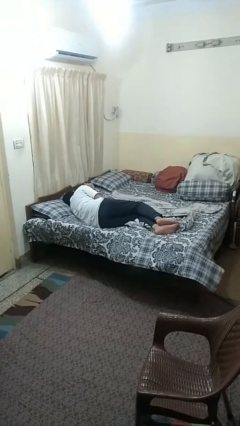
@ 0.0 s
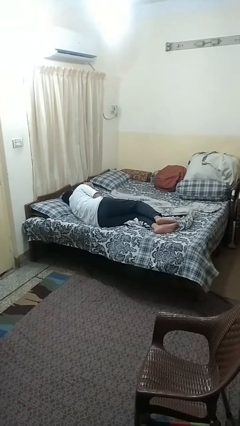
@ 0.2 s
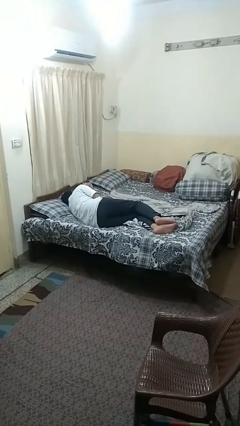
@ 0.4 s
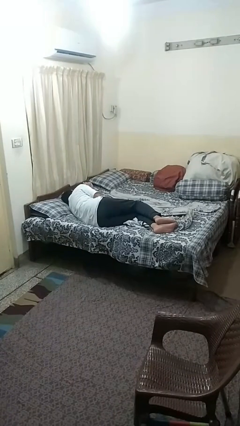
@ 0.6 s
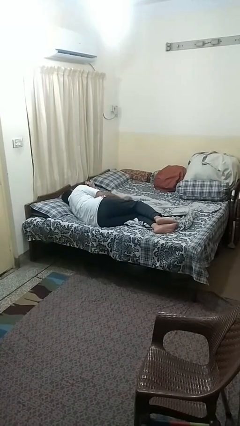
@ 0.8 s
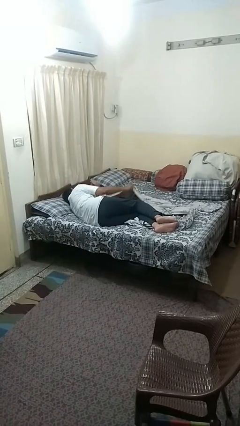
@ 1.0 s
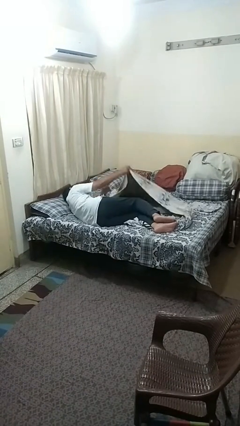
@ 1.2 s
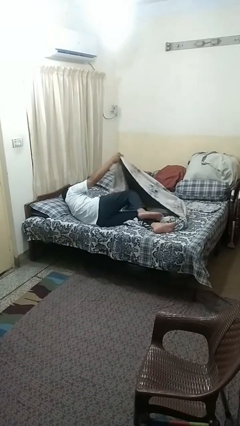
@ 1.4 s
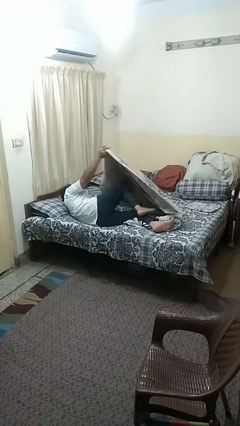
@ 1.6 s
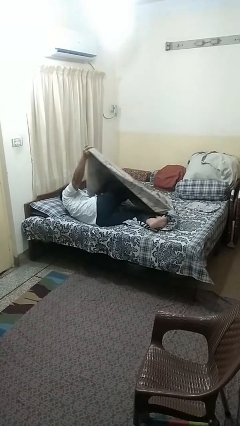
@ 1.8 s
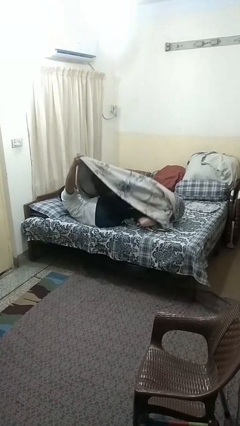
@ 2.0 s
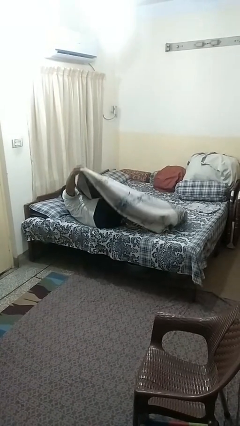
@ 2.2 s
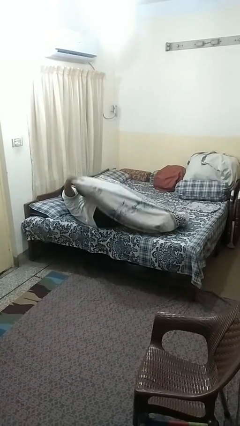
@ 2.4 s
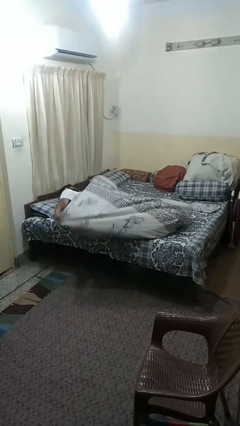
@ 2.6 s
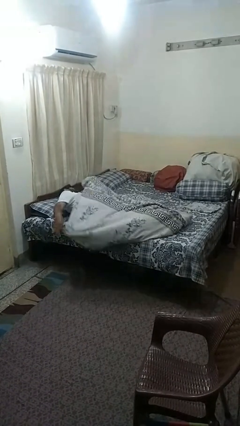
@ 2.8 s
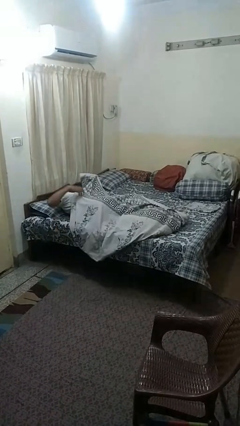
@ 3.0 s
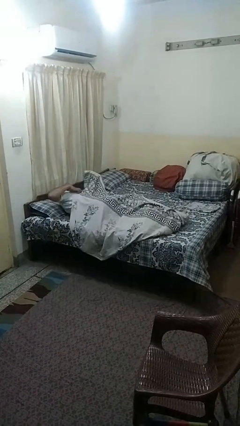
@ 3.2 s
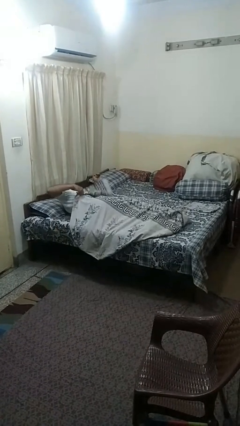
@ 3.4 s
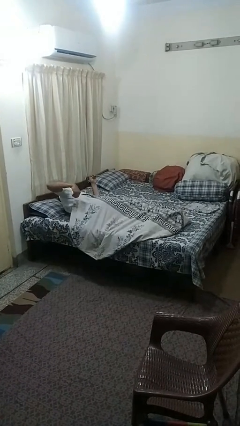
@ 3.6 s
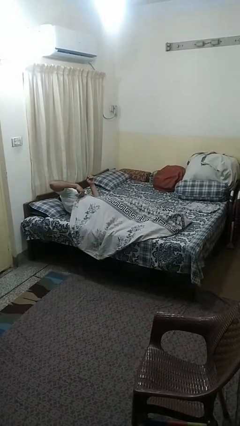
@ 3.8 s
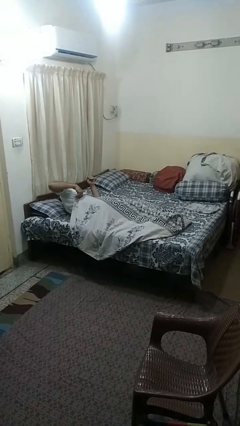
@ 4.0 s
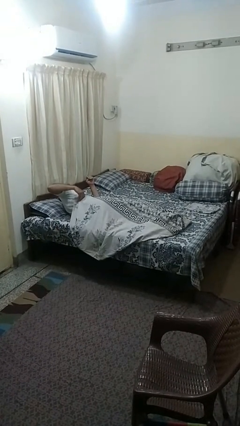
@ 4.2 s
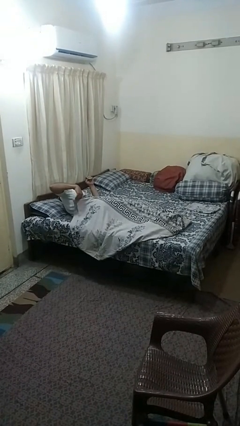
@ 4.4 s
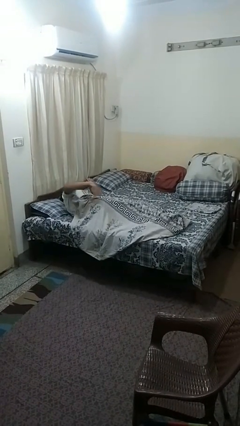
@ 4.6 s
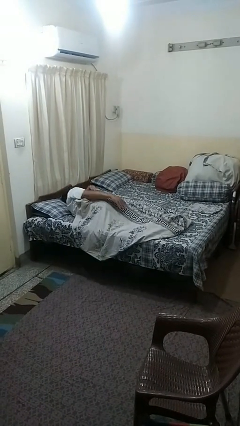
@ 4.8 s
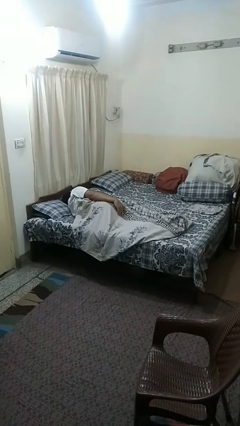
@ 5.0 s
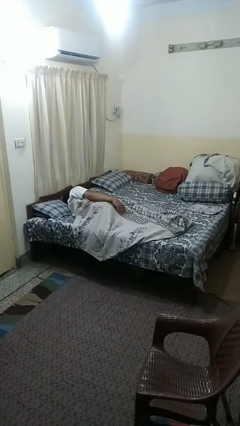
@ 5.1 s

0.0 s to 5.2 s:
person covers with bedsheets

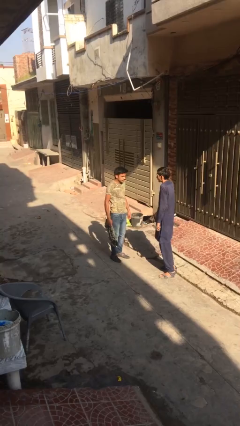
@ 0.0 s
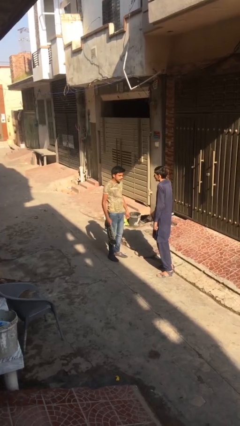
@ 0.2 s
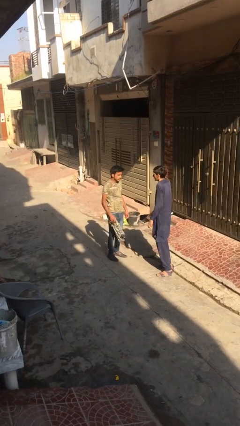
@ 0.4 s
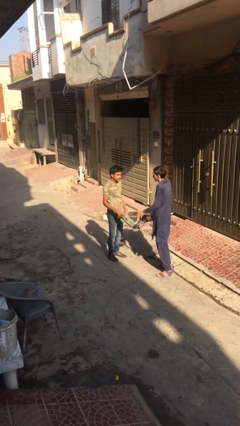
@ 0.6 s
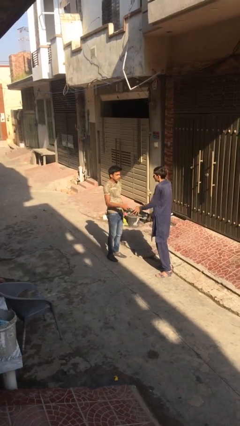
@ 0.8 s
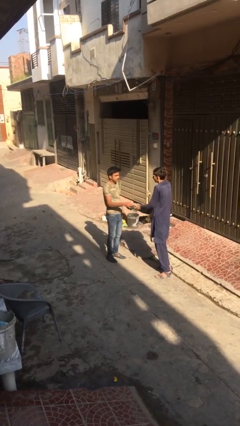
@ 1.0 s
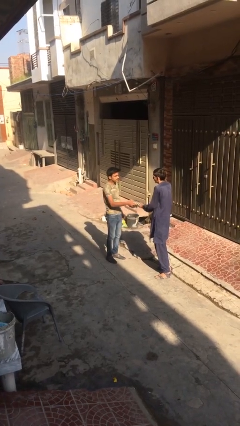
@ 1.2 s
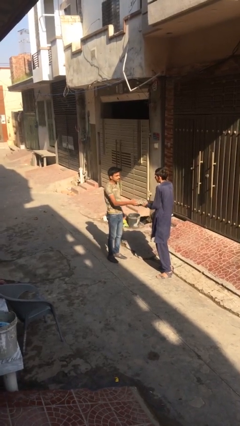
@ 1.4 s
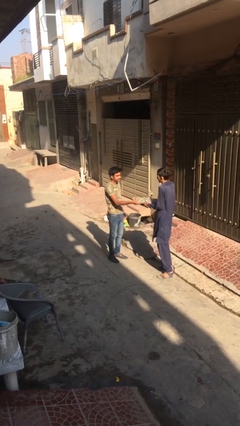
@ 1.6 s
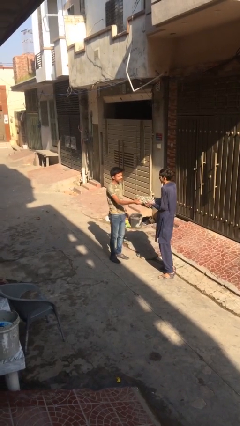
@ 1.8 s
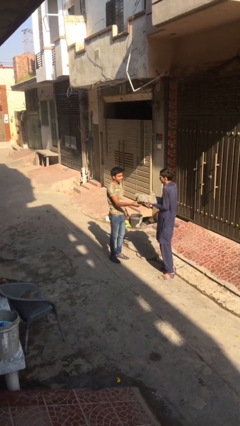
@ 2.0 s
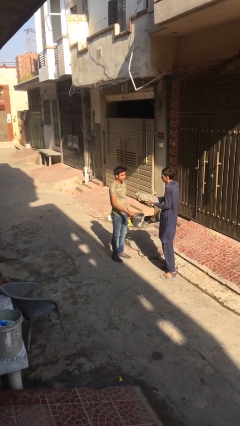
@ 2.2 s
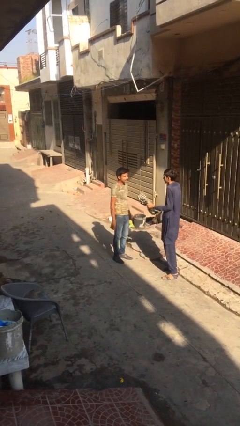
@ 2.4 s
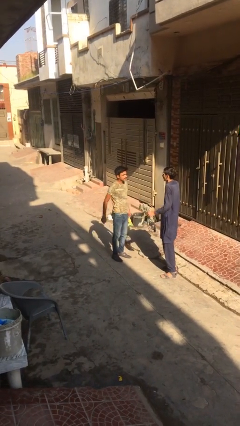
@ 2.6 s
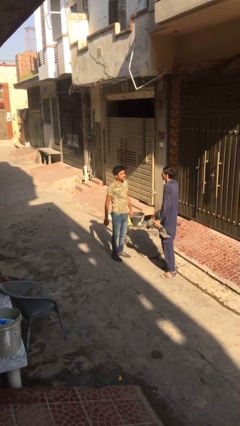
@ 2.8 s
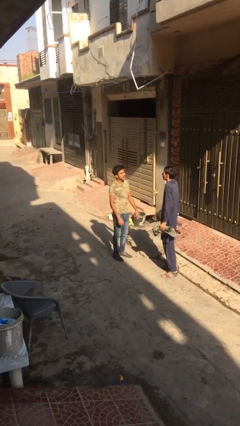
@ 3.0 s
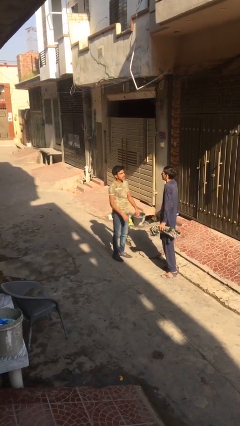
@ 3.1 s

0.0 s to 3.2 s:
person transfers object to person

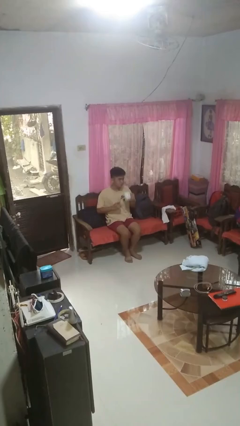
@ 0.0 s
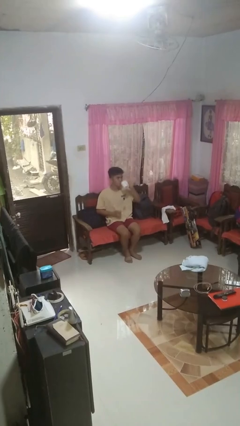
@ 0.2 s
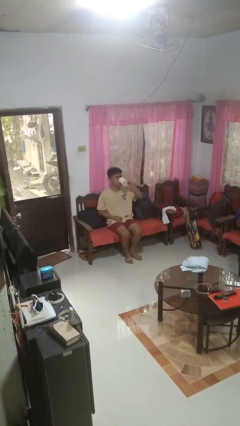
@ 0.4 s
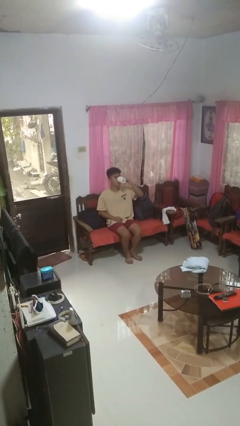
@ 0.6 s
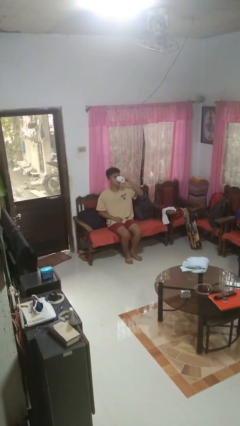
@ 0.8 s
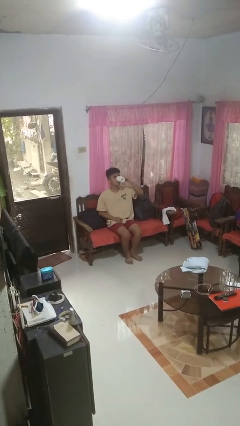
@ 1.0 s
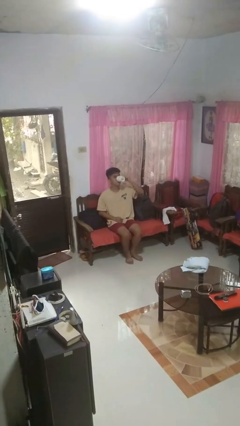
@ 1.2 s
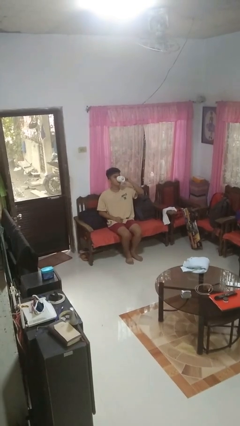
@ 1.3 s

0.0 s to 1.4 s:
person drinks from mug

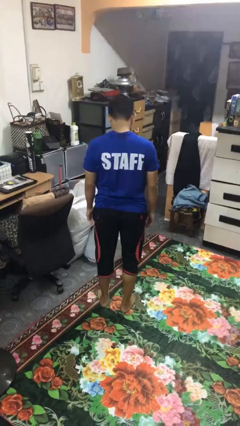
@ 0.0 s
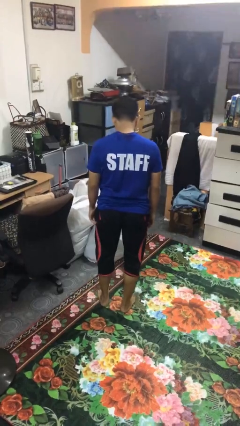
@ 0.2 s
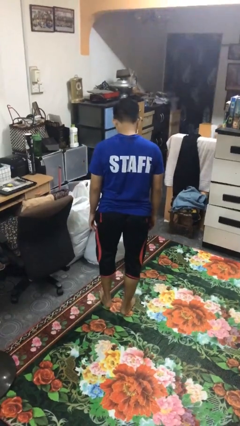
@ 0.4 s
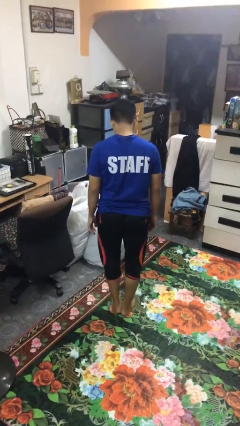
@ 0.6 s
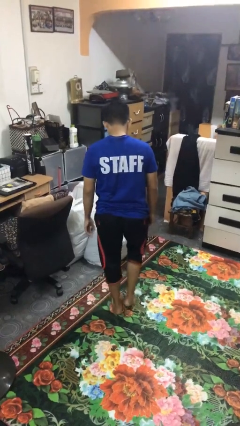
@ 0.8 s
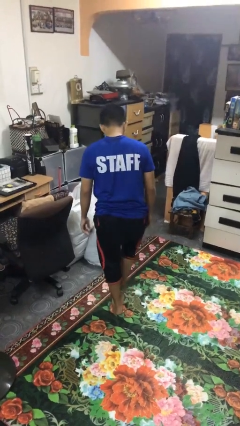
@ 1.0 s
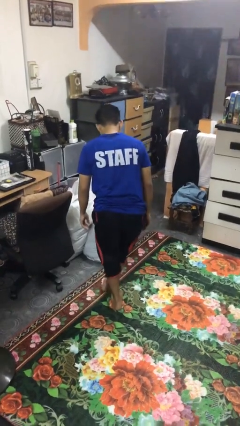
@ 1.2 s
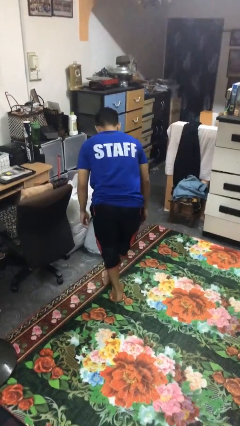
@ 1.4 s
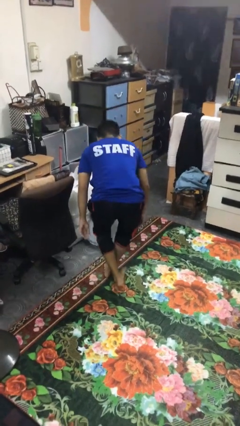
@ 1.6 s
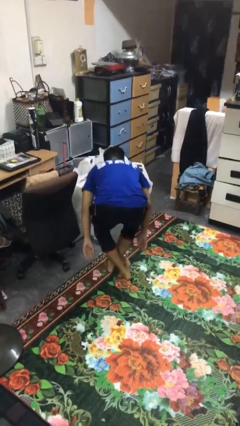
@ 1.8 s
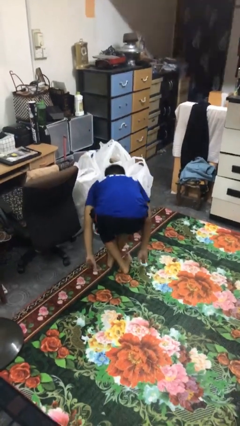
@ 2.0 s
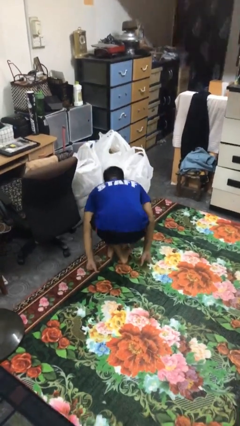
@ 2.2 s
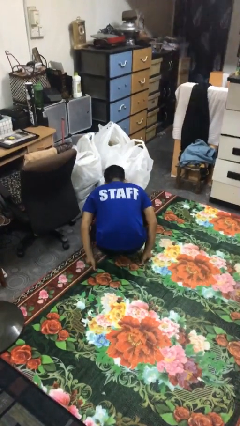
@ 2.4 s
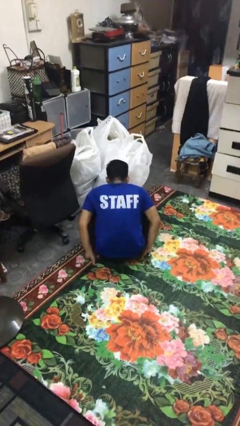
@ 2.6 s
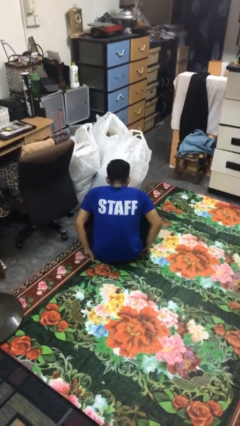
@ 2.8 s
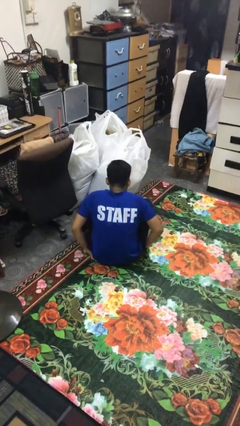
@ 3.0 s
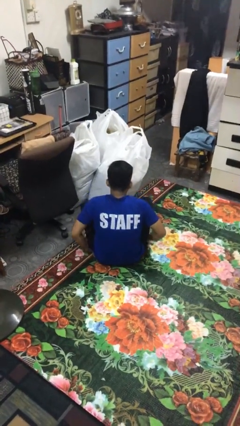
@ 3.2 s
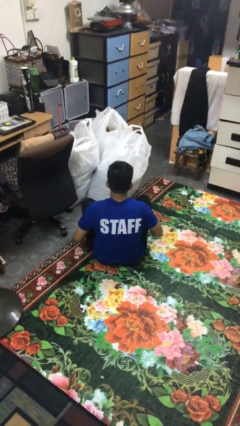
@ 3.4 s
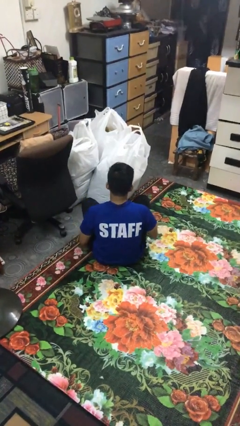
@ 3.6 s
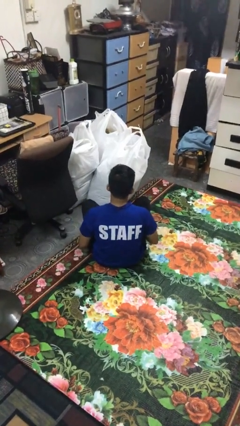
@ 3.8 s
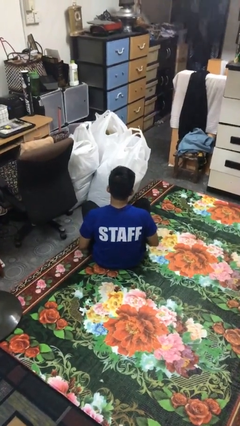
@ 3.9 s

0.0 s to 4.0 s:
person sits crisscross

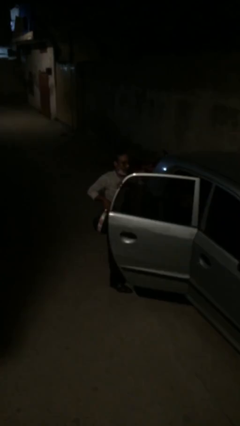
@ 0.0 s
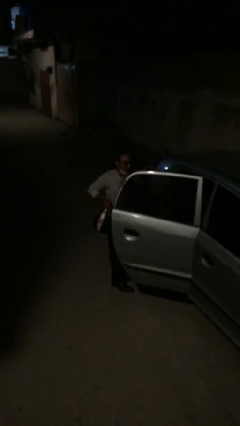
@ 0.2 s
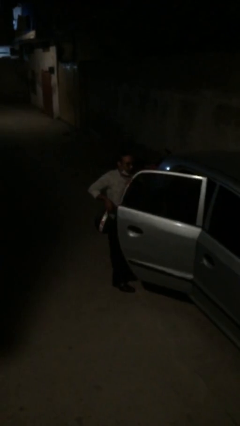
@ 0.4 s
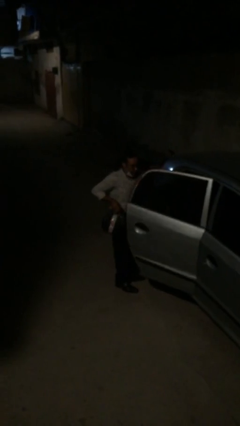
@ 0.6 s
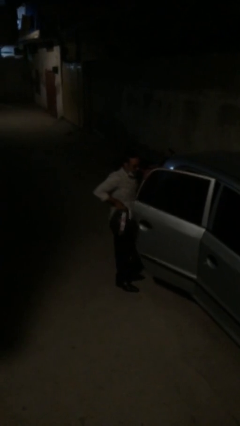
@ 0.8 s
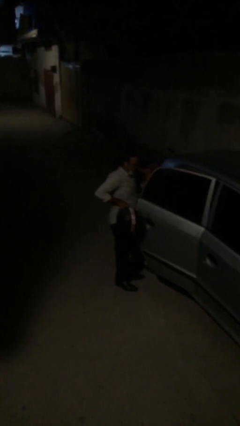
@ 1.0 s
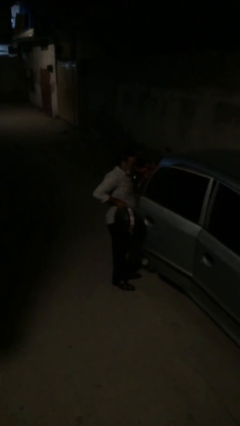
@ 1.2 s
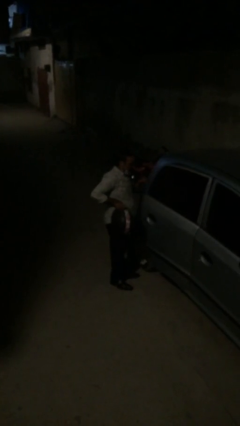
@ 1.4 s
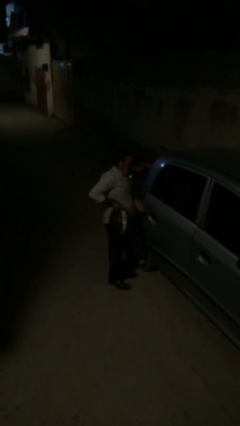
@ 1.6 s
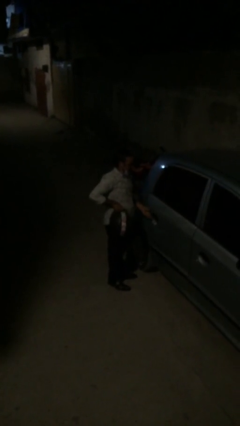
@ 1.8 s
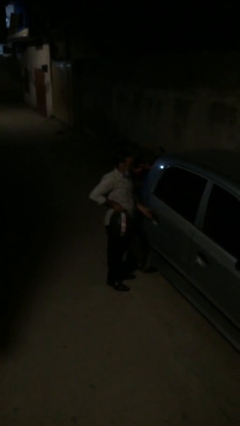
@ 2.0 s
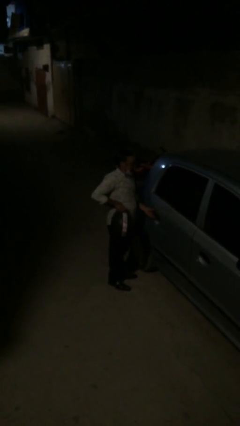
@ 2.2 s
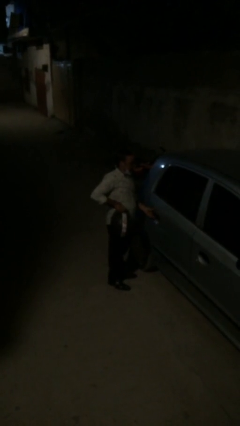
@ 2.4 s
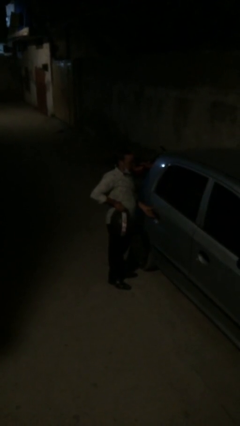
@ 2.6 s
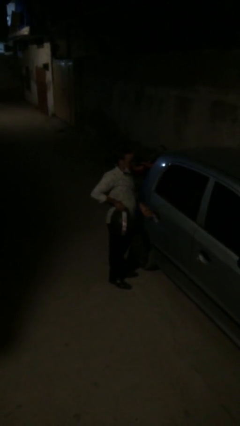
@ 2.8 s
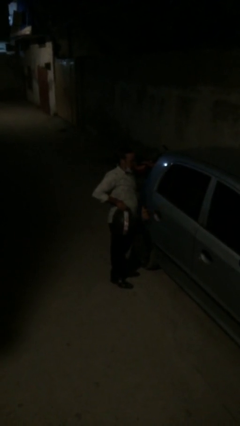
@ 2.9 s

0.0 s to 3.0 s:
person closes car door

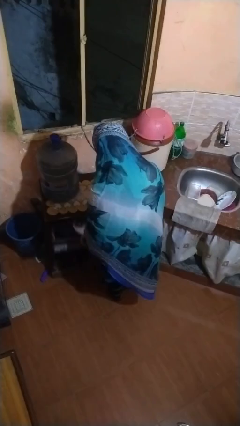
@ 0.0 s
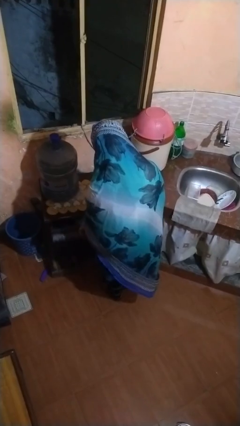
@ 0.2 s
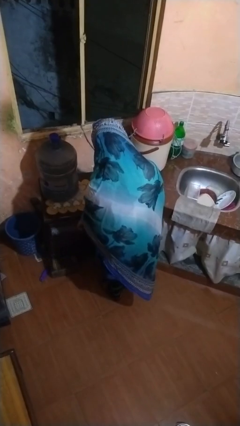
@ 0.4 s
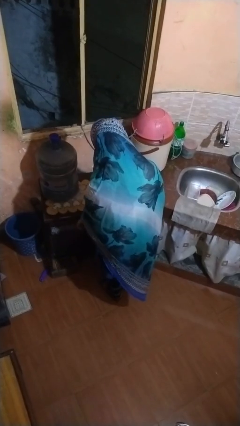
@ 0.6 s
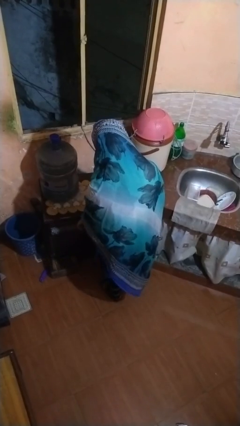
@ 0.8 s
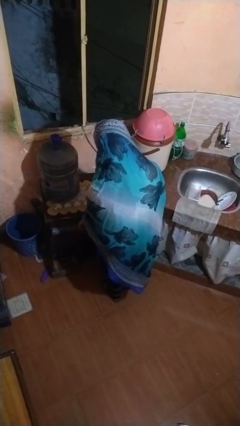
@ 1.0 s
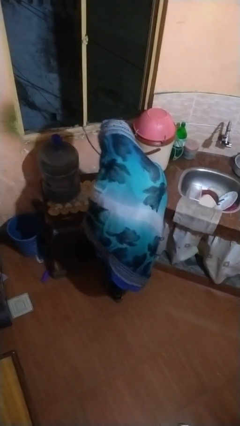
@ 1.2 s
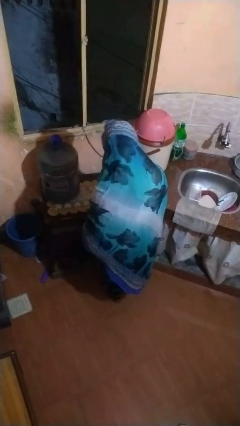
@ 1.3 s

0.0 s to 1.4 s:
person closes kitchen drawer
